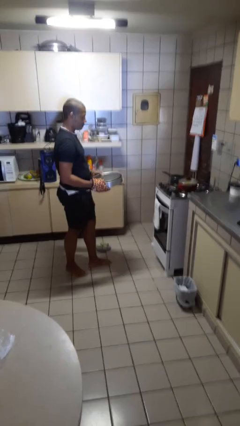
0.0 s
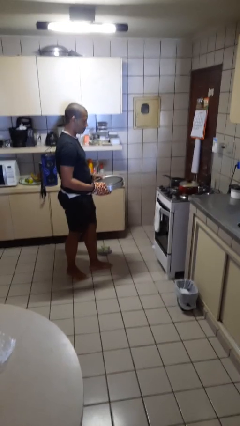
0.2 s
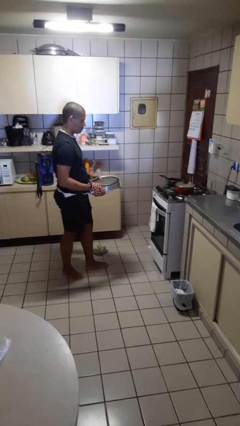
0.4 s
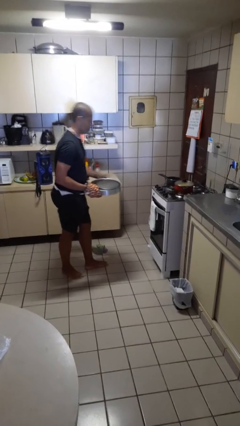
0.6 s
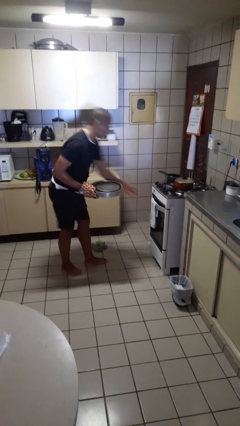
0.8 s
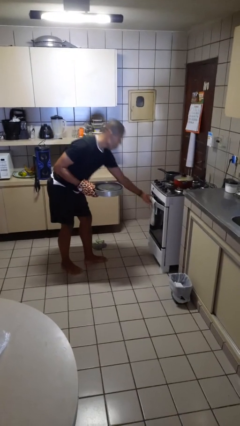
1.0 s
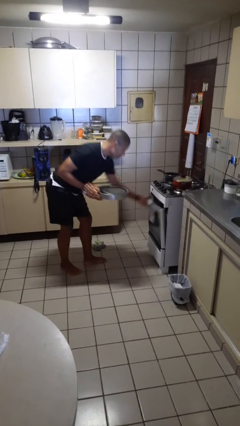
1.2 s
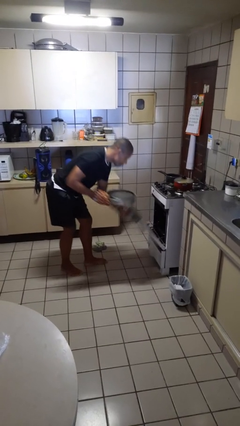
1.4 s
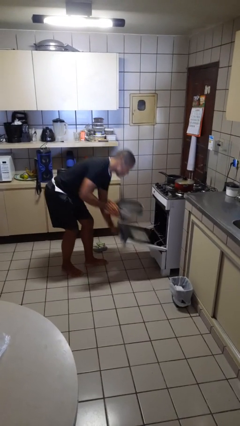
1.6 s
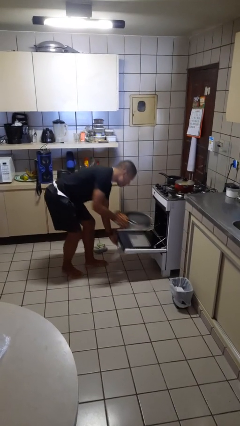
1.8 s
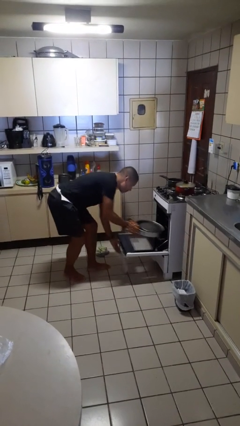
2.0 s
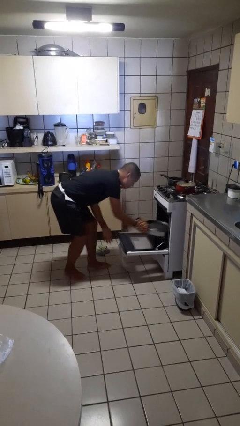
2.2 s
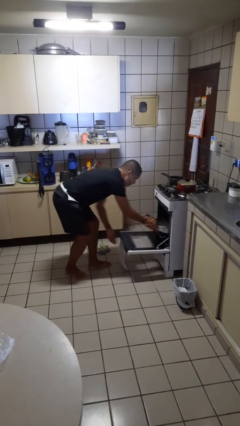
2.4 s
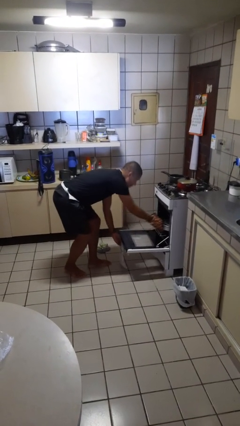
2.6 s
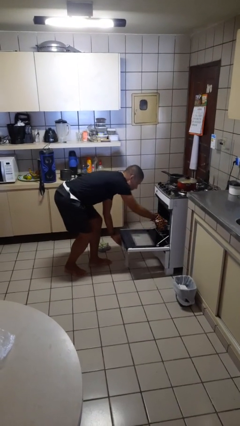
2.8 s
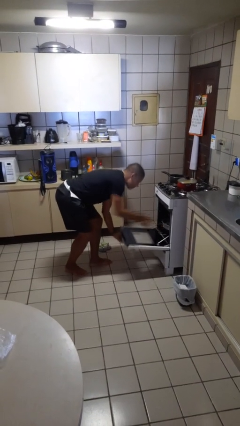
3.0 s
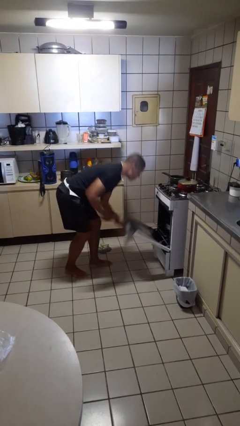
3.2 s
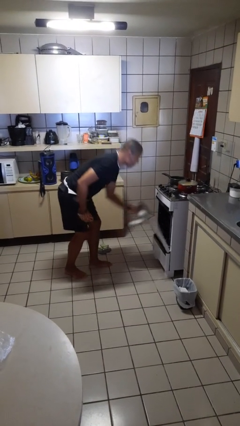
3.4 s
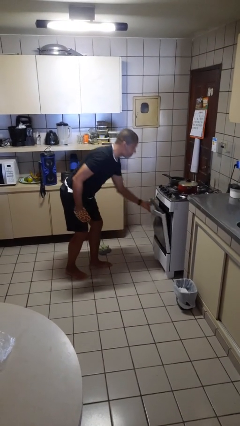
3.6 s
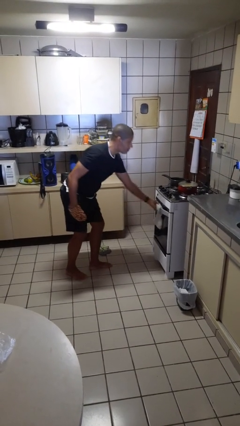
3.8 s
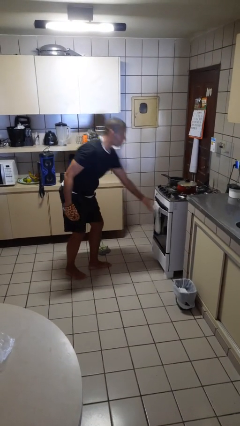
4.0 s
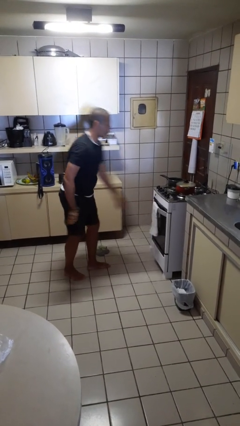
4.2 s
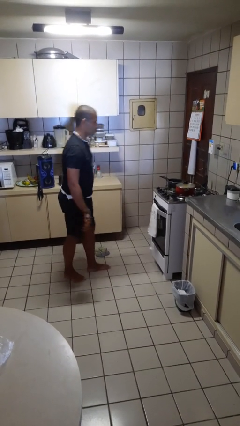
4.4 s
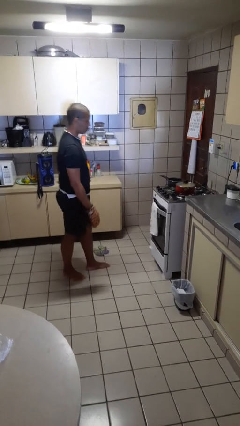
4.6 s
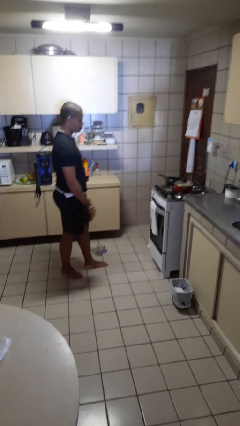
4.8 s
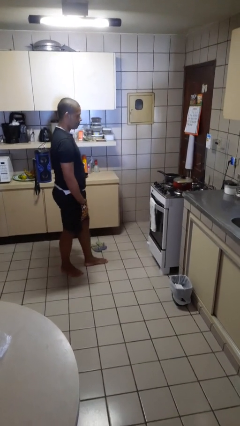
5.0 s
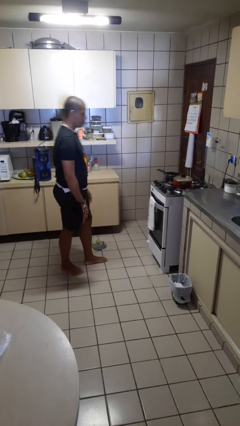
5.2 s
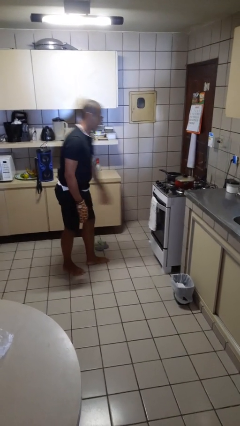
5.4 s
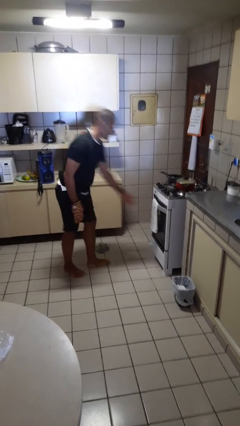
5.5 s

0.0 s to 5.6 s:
person puts object into oven

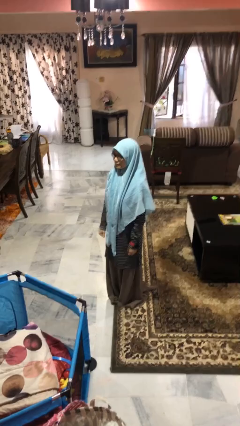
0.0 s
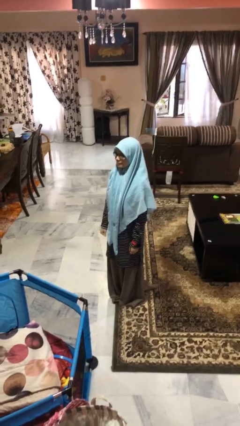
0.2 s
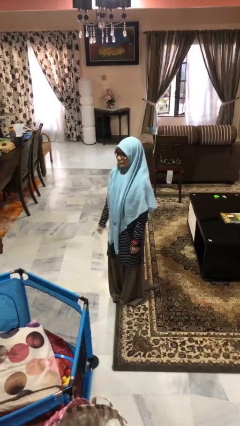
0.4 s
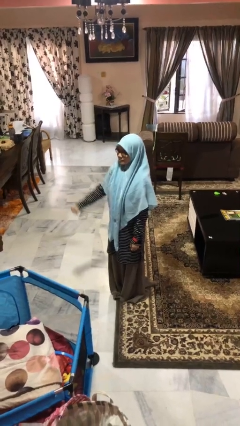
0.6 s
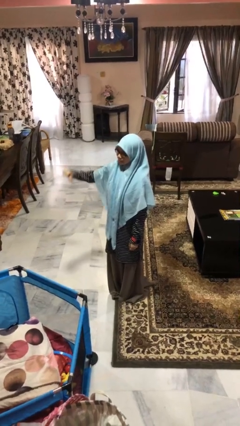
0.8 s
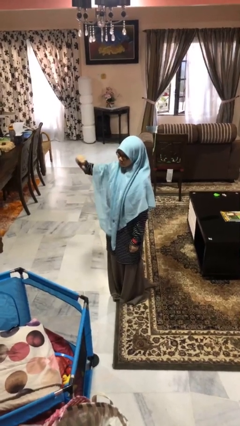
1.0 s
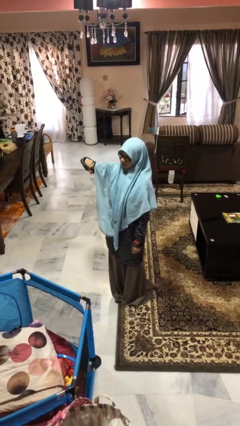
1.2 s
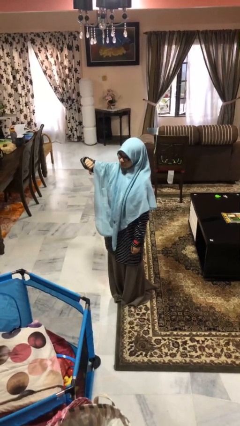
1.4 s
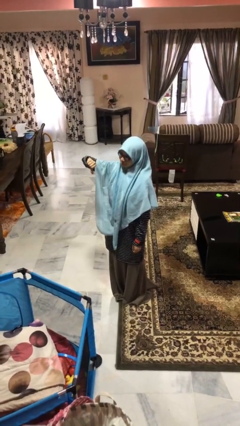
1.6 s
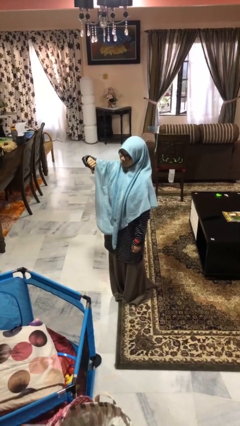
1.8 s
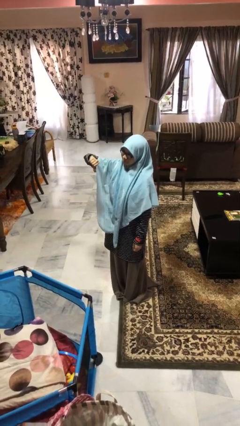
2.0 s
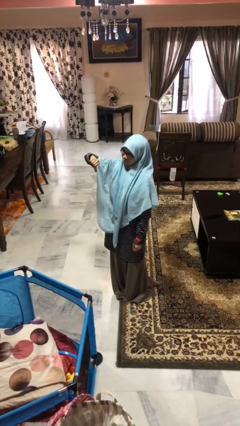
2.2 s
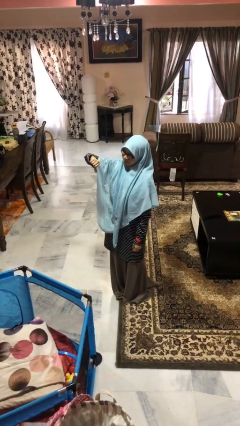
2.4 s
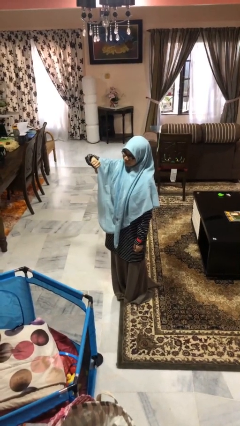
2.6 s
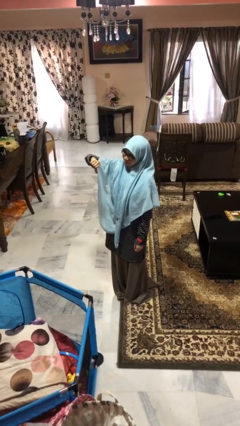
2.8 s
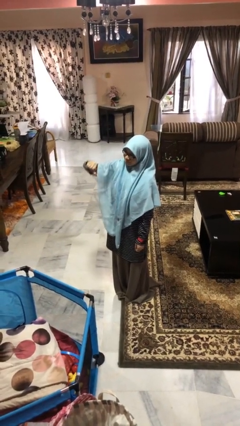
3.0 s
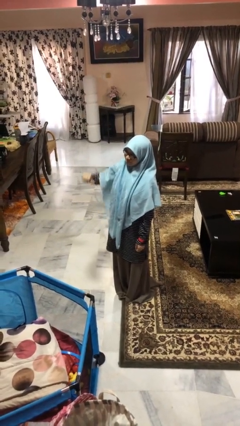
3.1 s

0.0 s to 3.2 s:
person gestures thumbs down

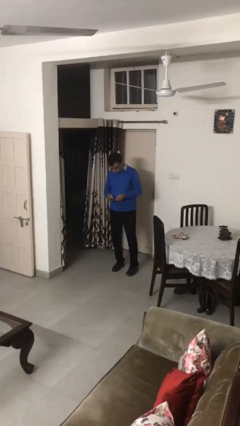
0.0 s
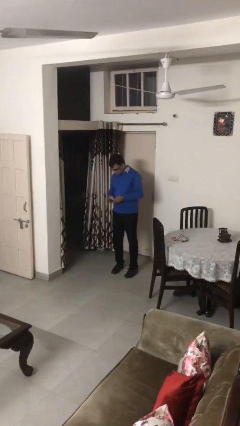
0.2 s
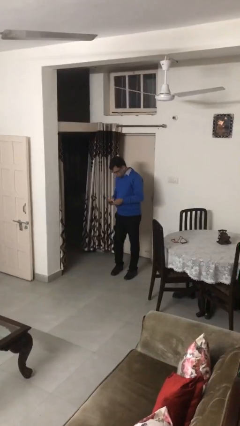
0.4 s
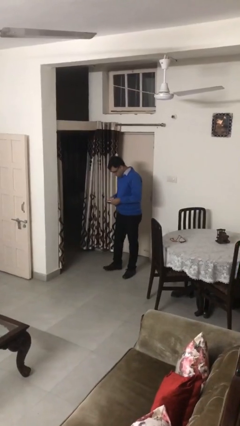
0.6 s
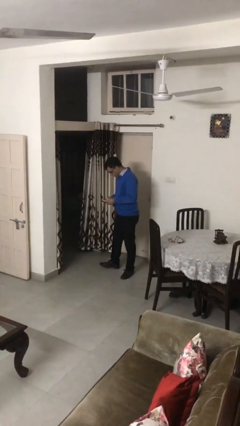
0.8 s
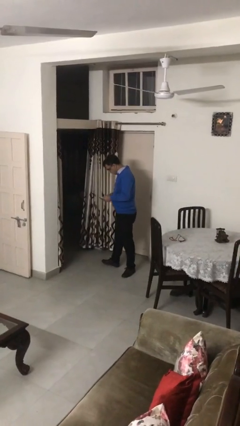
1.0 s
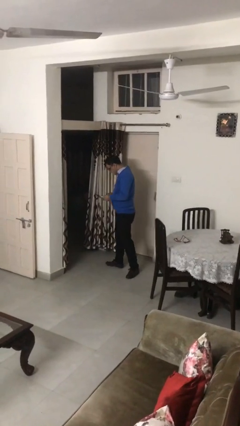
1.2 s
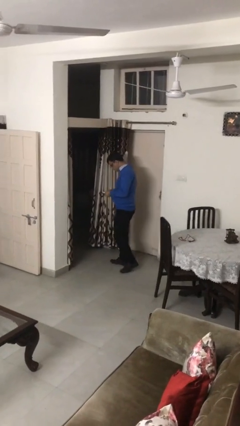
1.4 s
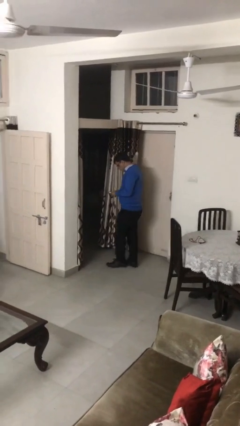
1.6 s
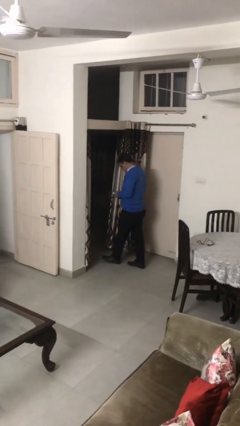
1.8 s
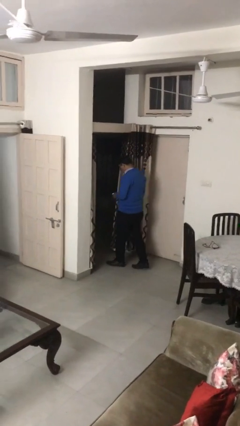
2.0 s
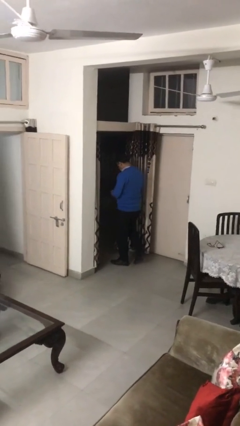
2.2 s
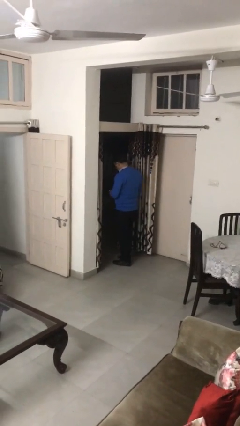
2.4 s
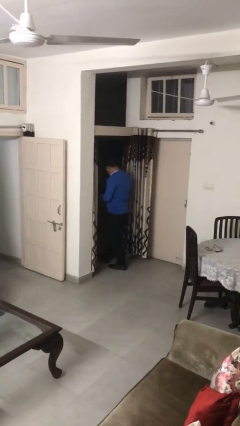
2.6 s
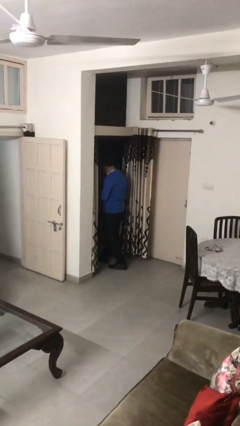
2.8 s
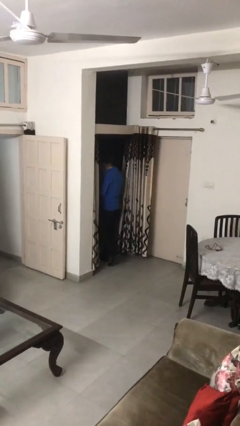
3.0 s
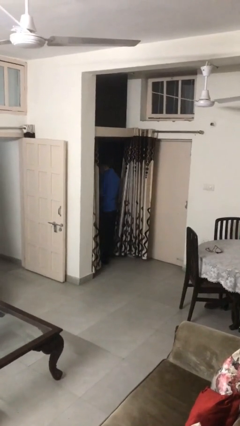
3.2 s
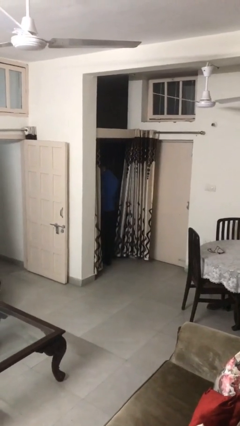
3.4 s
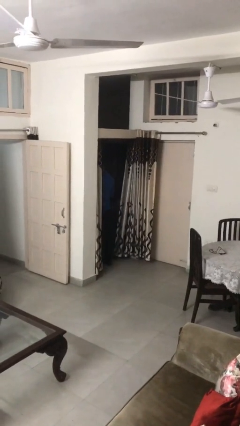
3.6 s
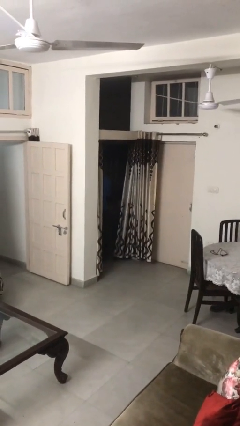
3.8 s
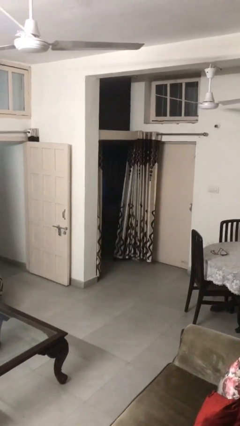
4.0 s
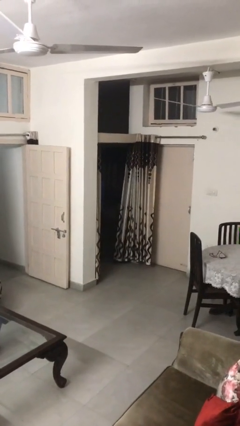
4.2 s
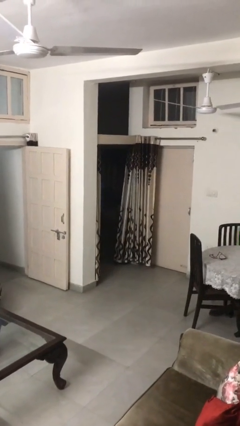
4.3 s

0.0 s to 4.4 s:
person exits scene through structure

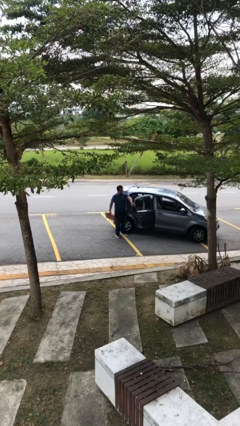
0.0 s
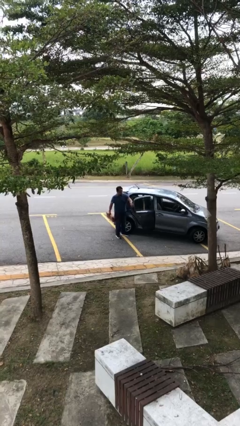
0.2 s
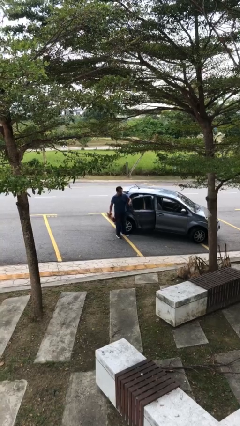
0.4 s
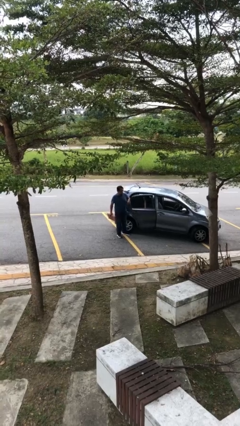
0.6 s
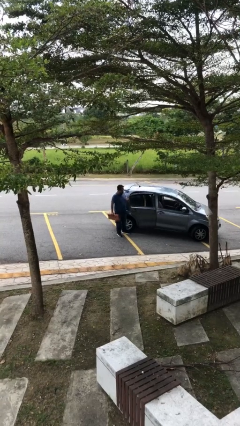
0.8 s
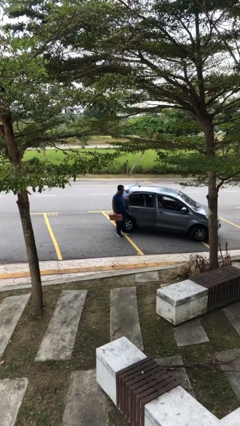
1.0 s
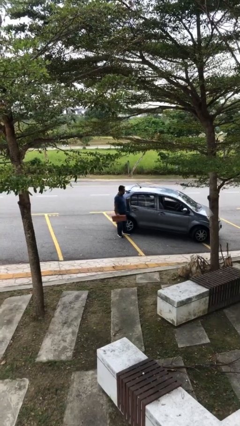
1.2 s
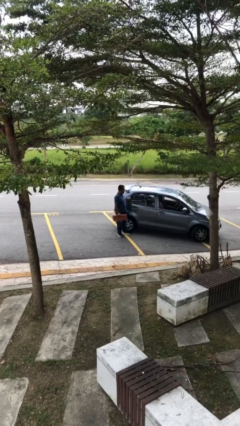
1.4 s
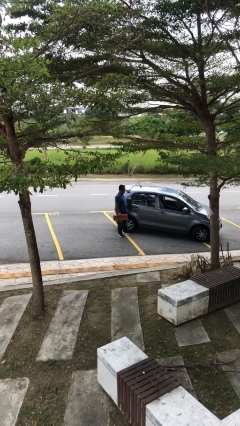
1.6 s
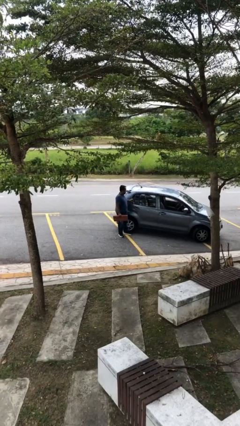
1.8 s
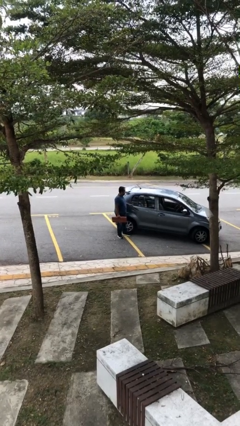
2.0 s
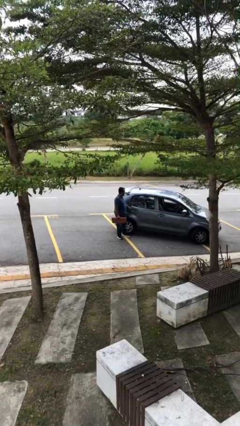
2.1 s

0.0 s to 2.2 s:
person closes car door

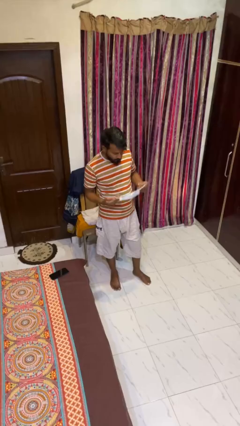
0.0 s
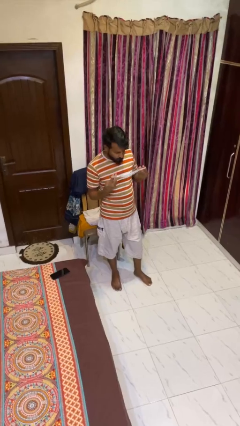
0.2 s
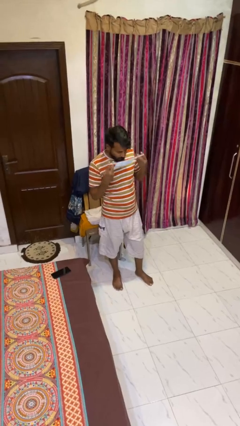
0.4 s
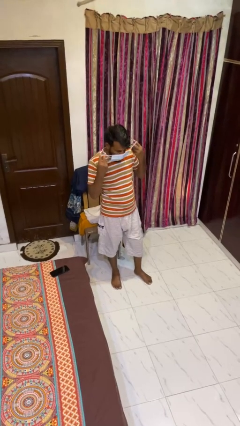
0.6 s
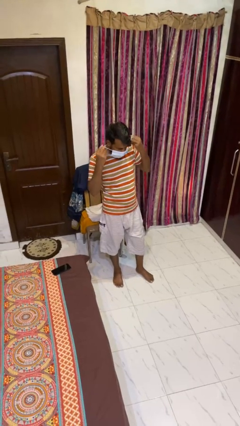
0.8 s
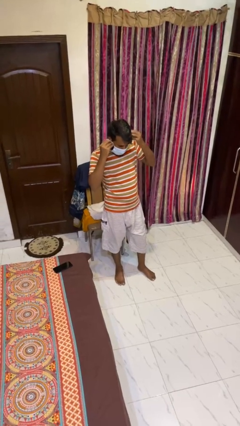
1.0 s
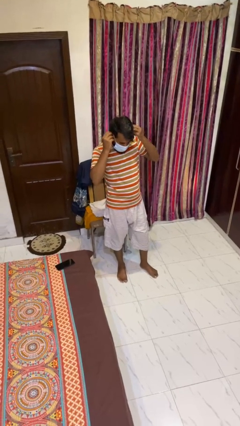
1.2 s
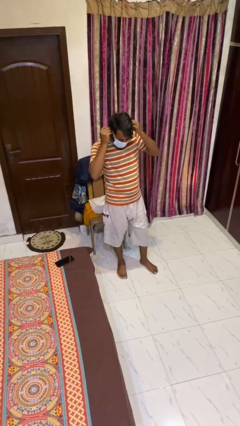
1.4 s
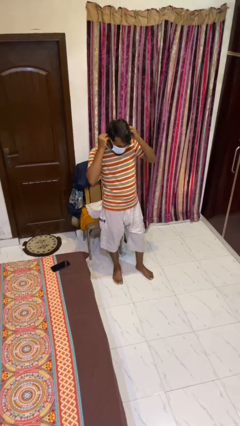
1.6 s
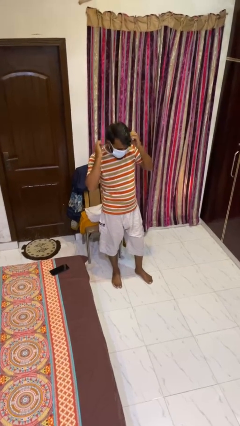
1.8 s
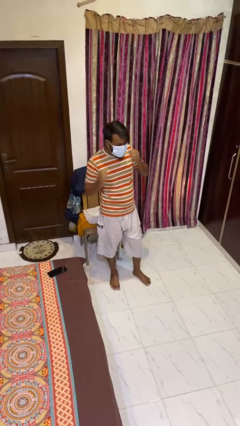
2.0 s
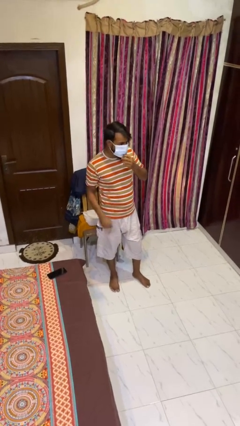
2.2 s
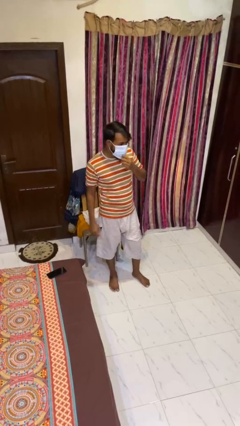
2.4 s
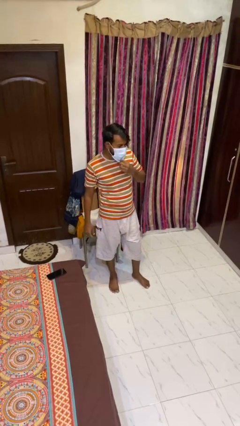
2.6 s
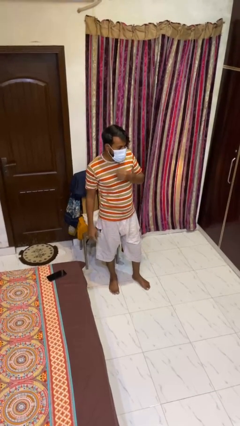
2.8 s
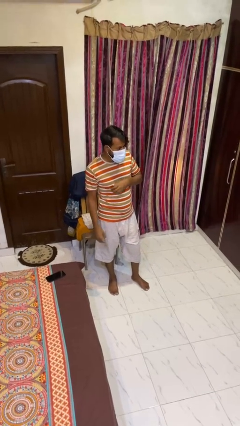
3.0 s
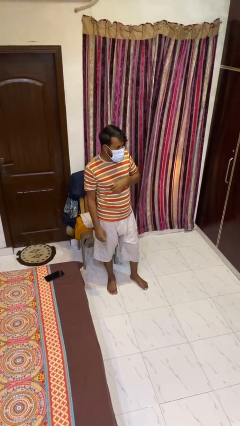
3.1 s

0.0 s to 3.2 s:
person puts on facemask
